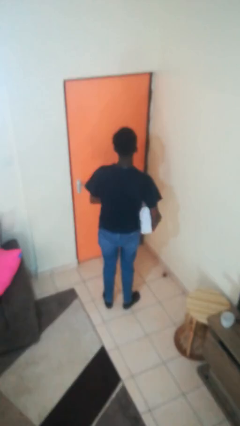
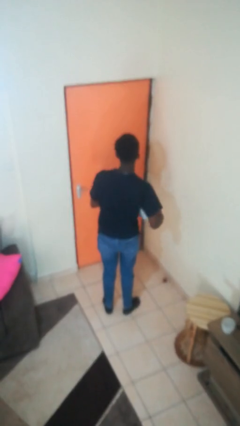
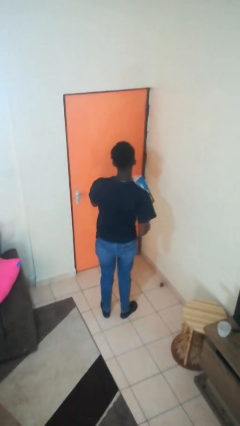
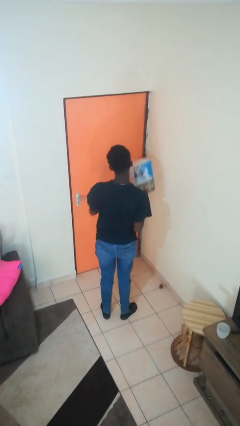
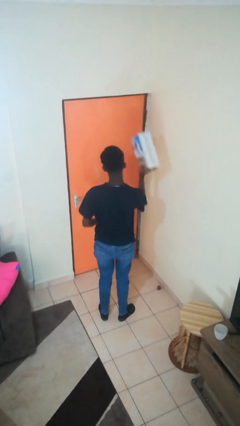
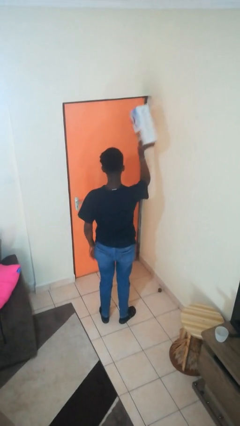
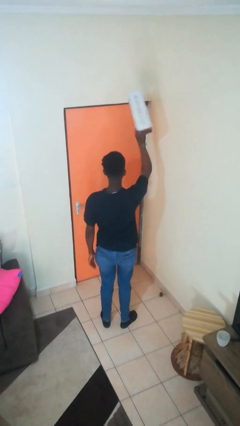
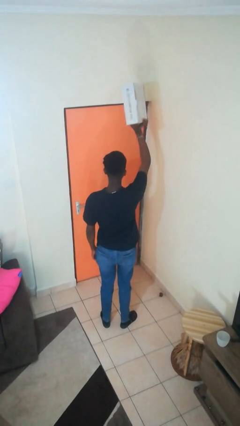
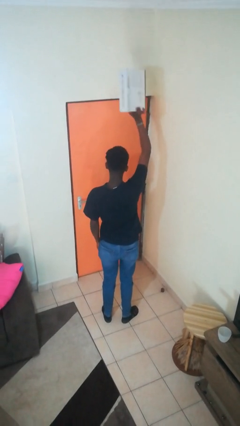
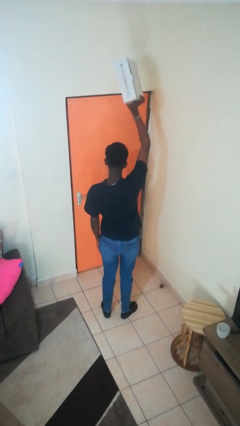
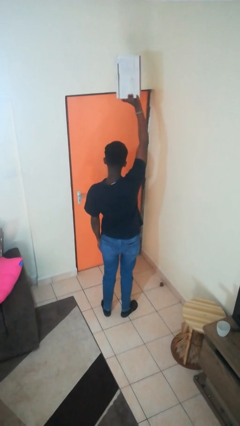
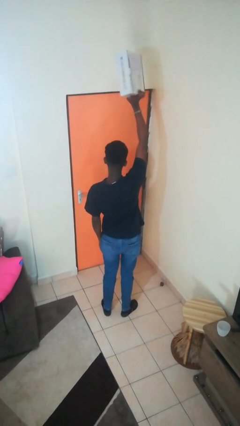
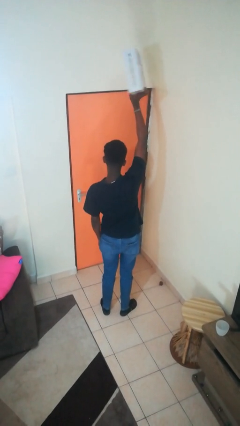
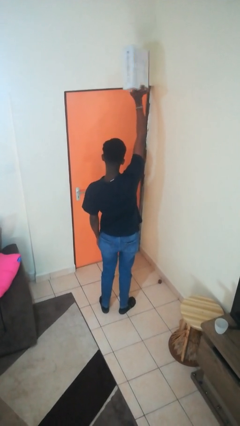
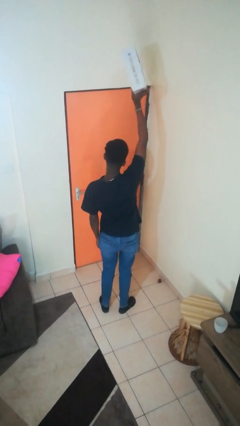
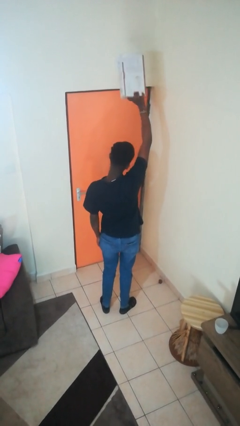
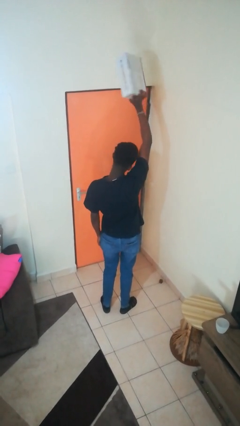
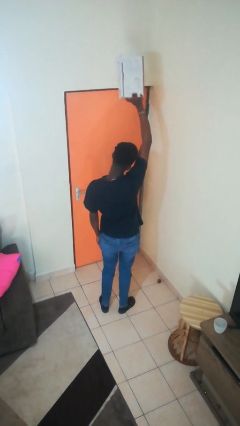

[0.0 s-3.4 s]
person holds object above head

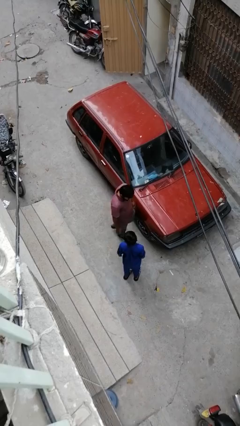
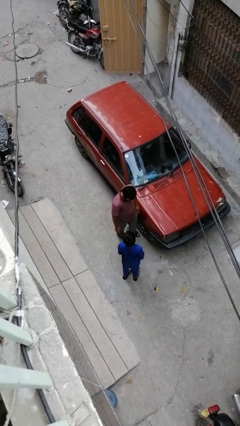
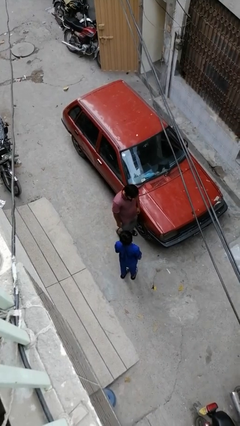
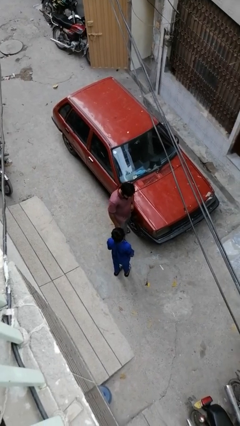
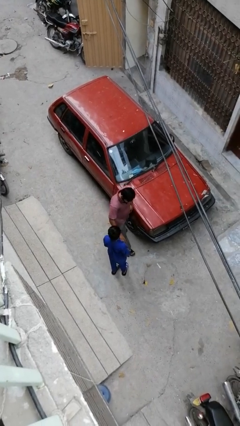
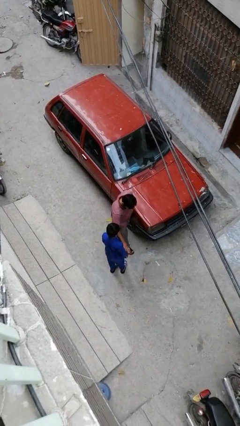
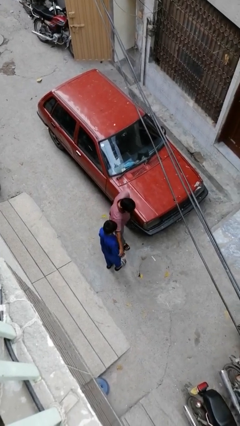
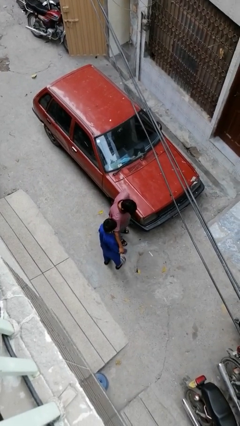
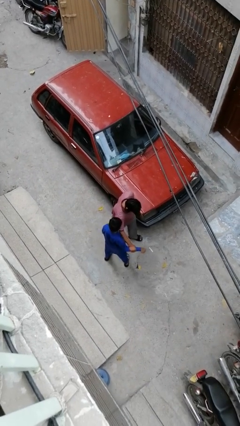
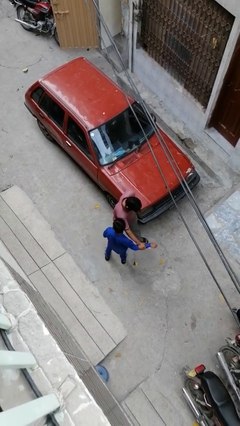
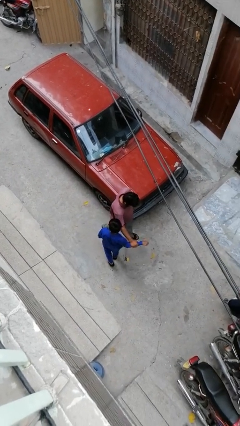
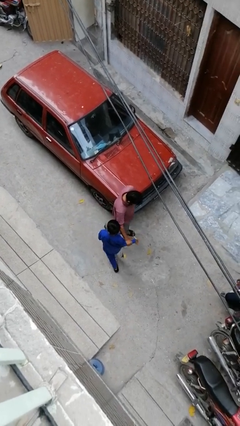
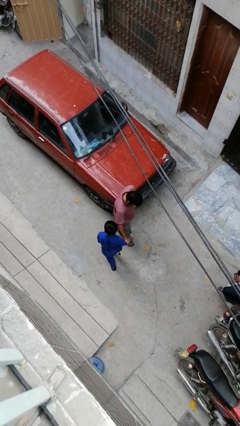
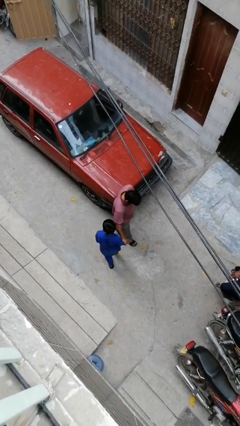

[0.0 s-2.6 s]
person grabs person by forearm

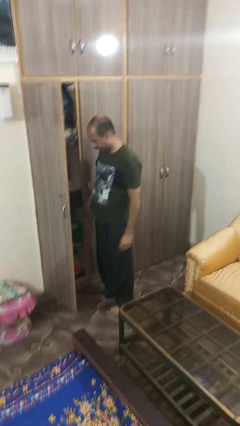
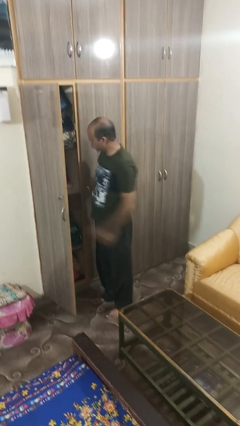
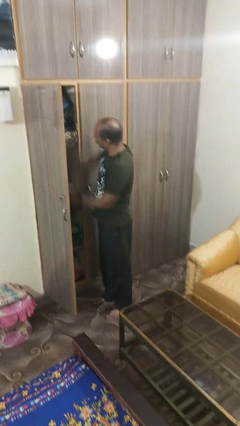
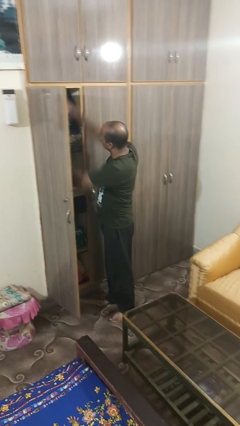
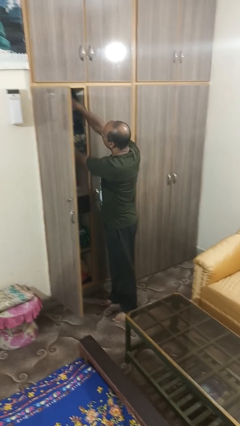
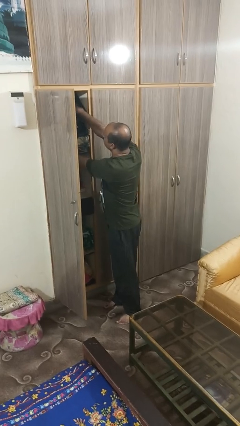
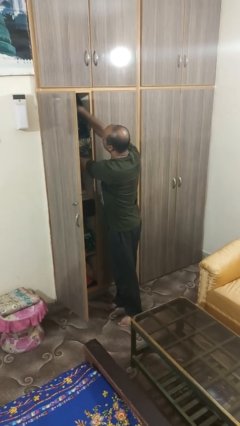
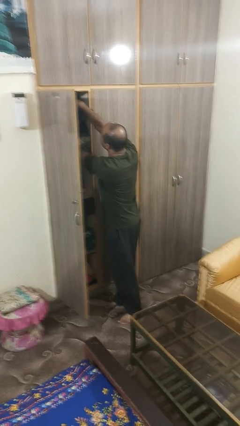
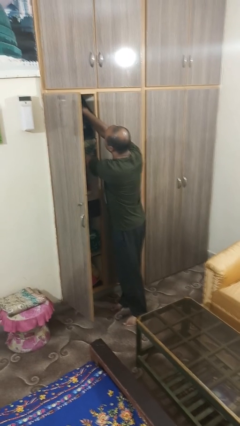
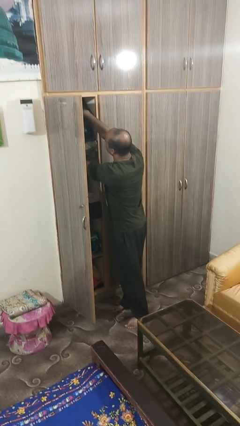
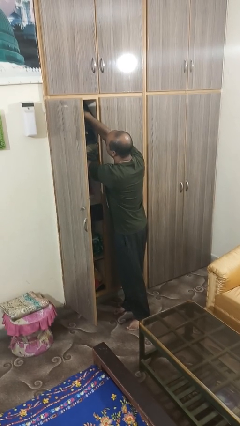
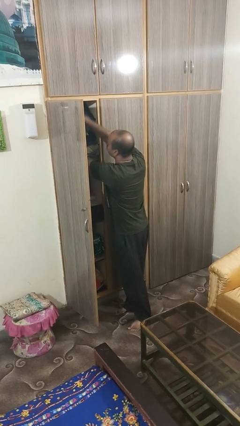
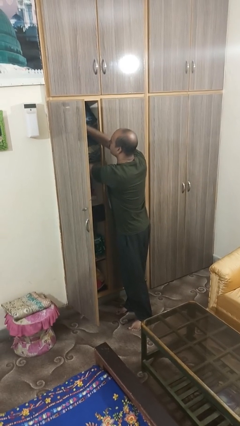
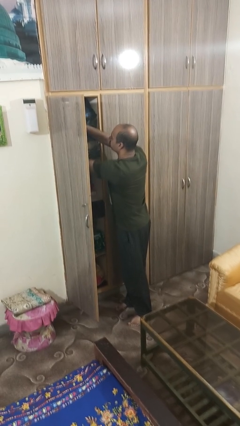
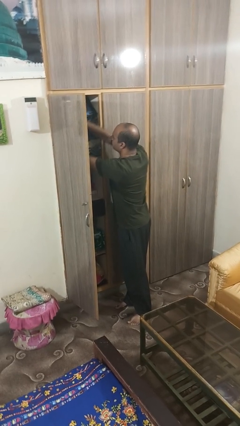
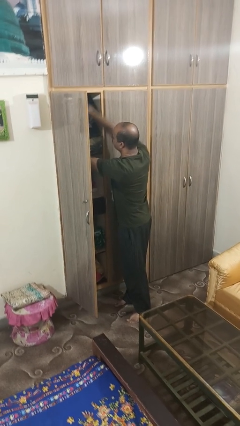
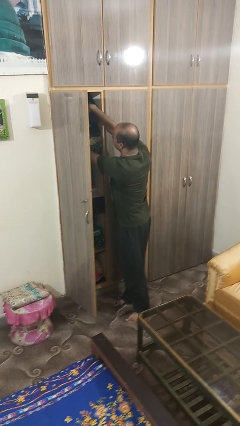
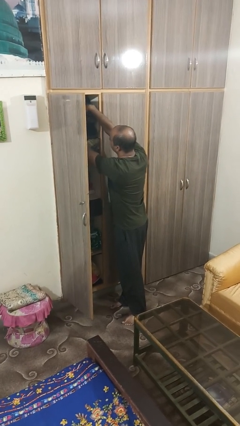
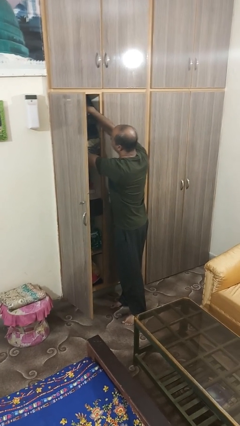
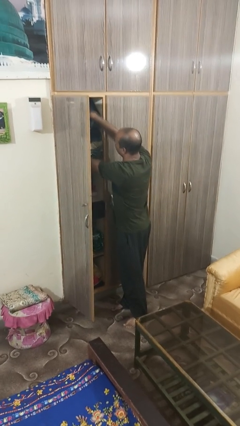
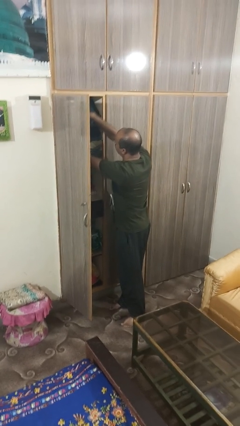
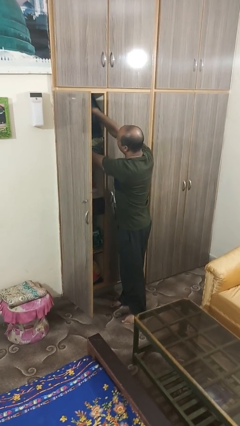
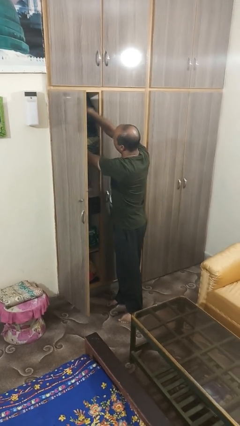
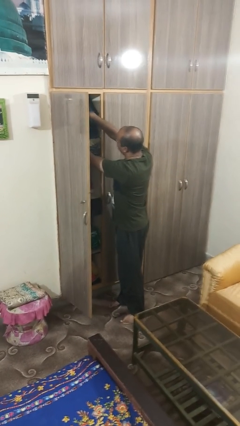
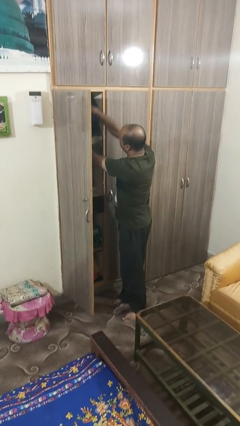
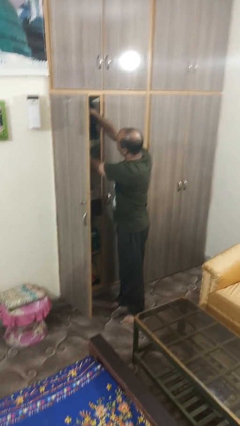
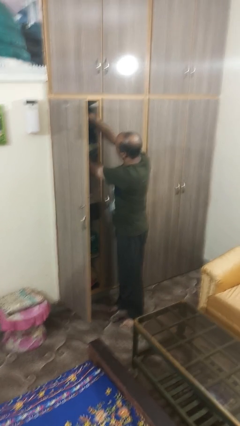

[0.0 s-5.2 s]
person searches in cabinet

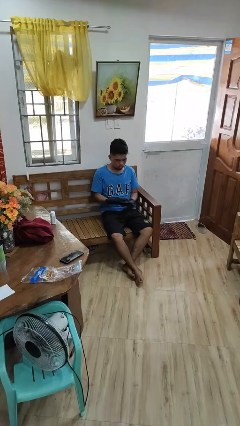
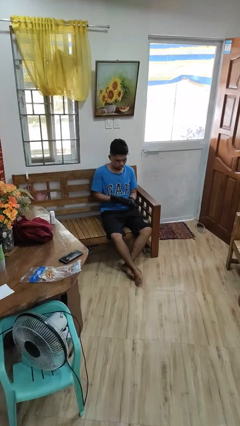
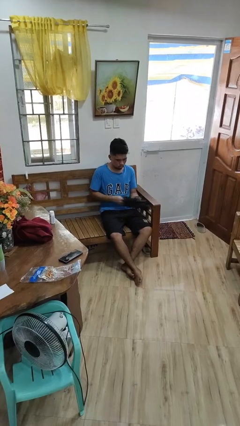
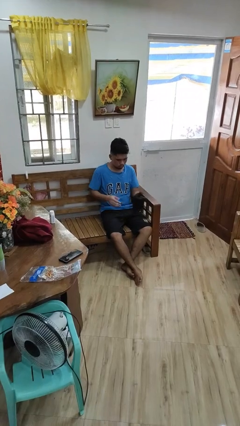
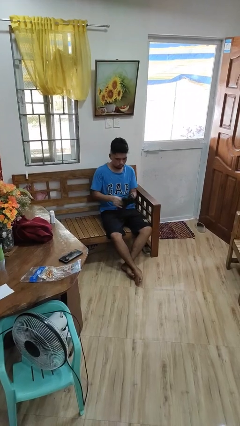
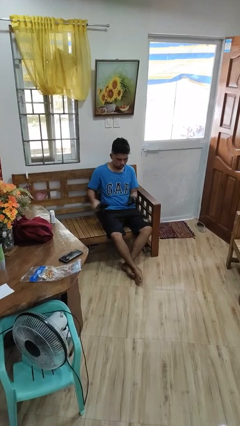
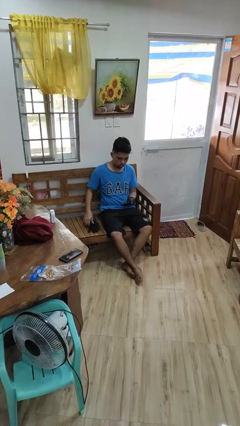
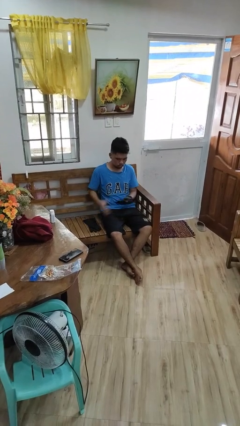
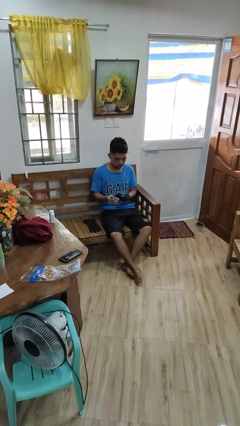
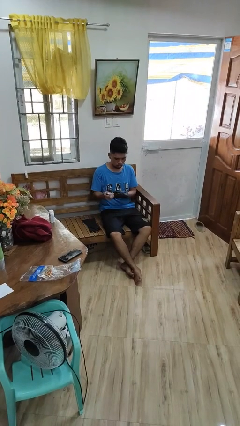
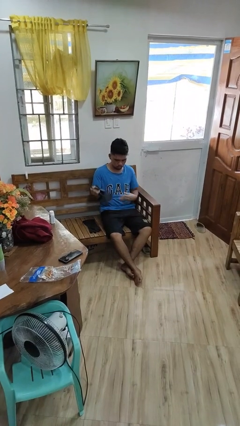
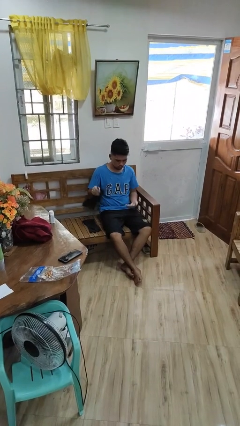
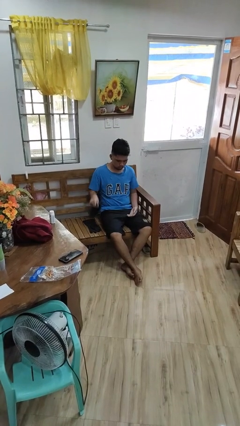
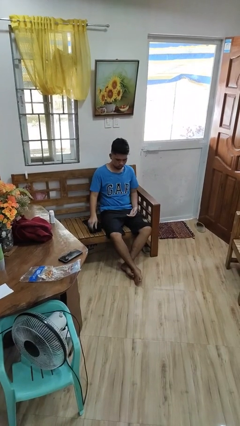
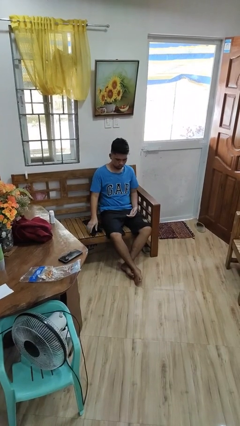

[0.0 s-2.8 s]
person takes off gloves

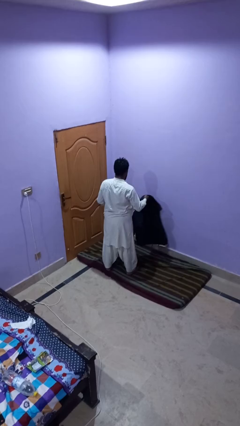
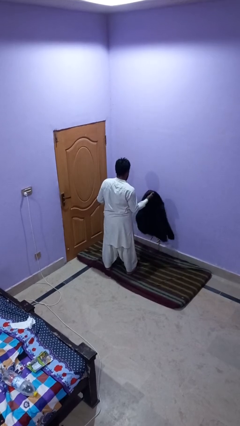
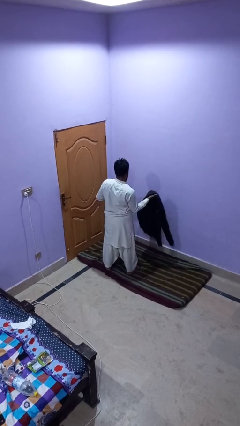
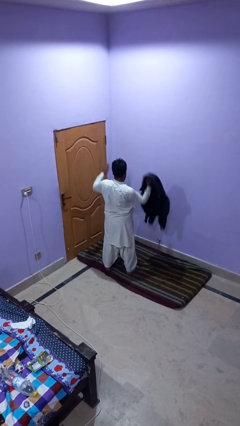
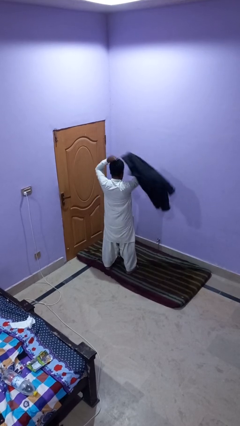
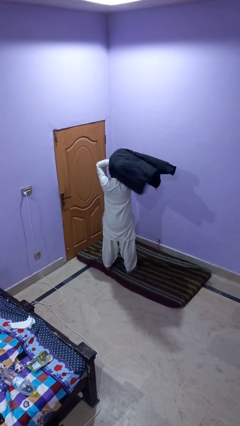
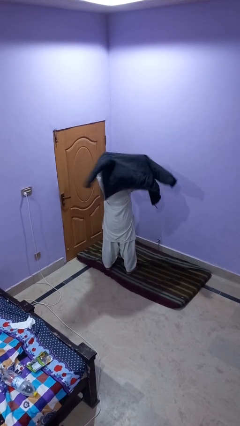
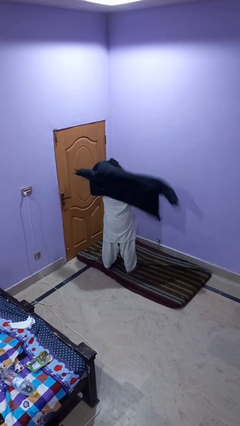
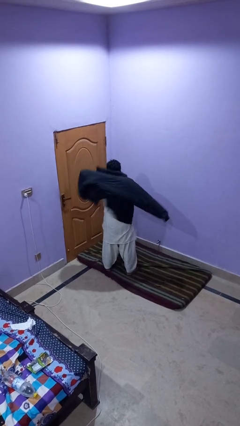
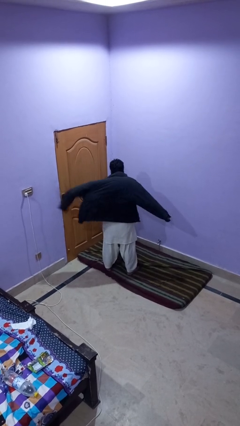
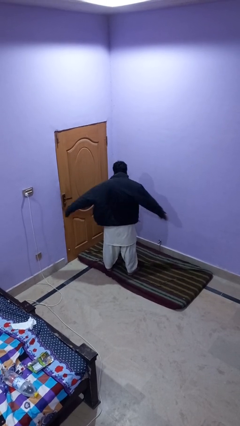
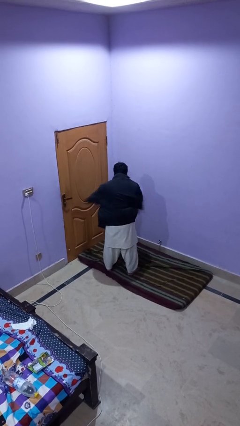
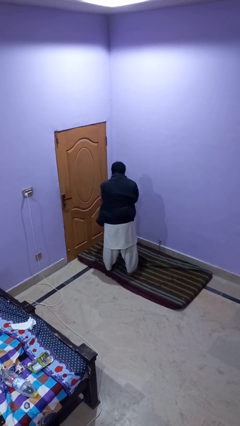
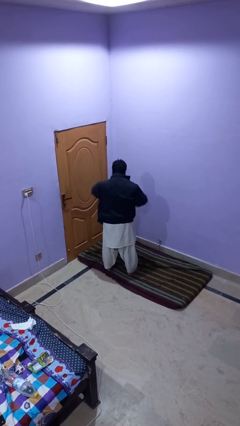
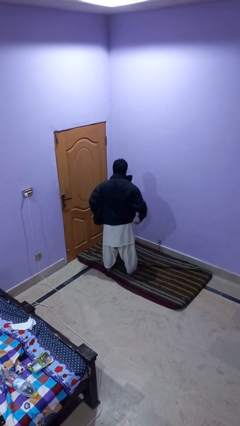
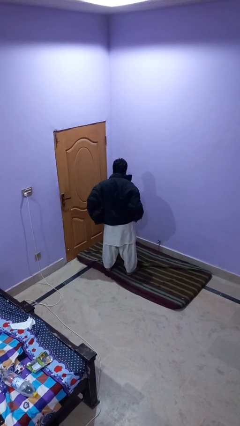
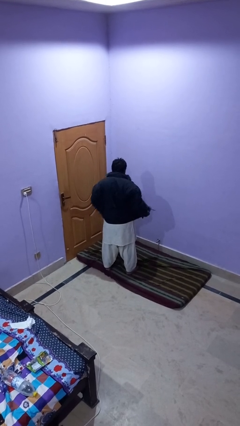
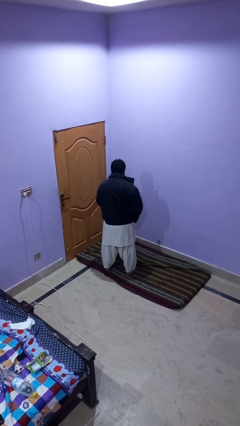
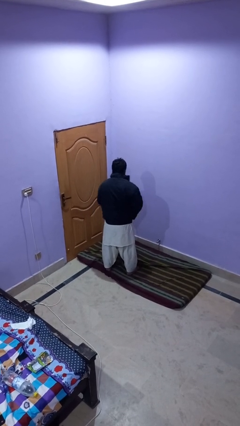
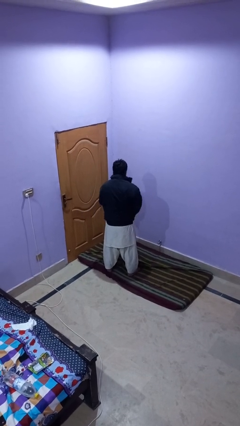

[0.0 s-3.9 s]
person puts on jacket
